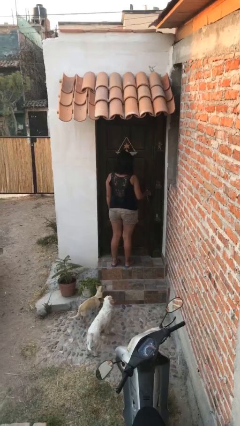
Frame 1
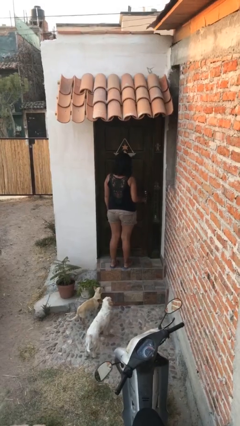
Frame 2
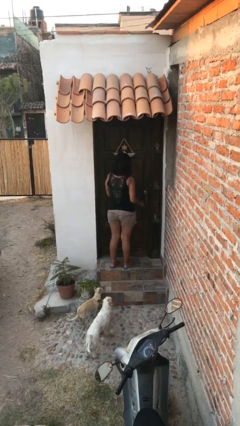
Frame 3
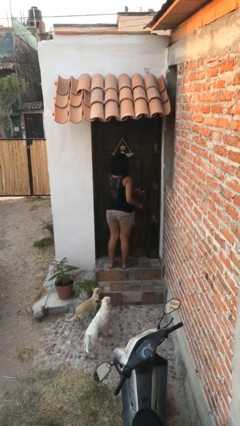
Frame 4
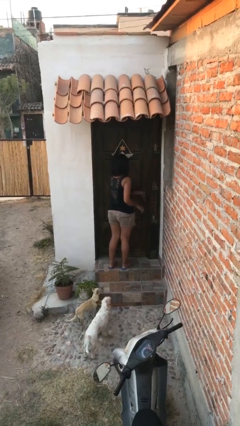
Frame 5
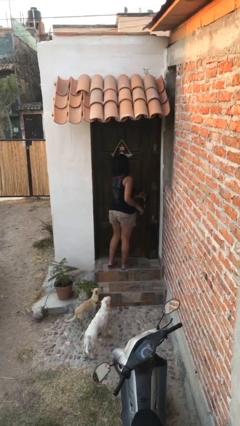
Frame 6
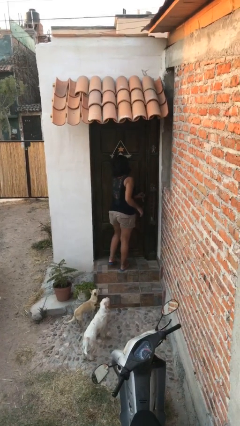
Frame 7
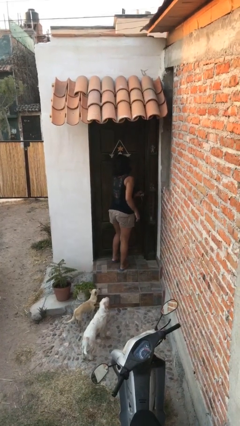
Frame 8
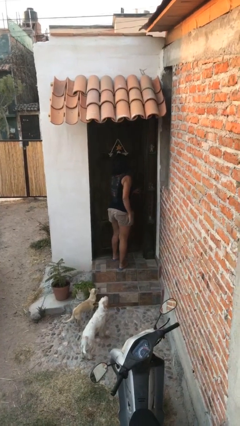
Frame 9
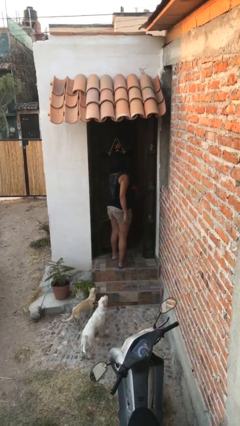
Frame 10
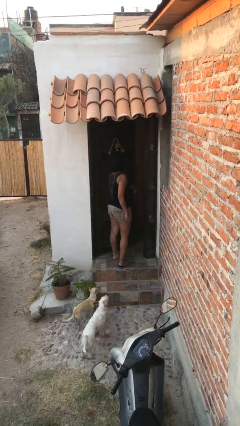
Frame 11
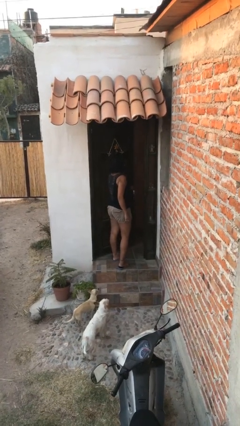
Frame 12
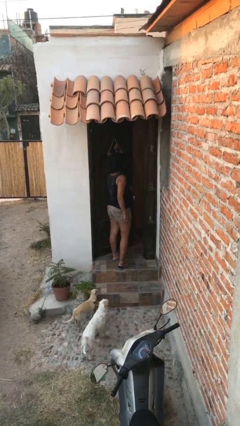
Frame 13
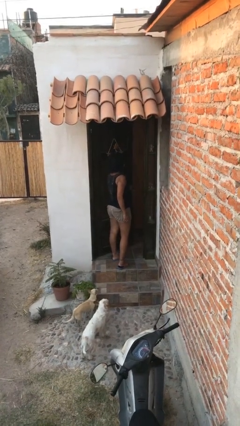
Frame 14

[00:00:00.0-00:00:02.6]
person opens facility door

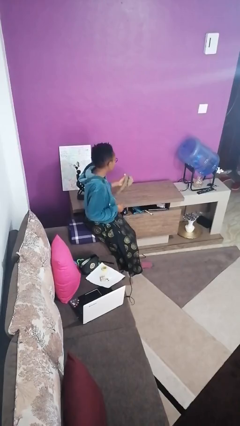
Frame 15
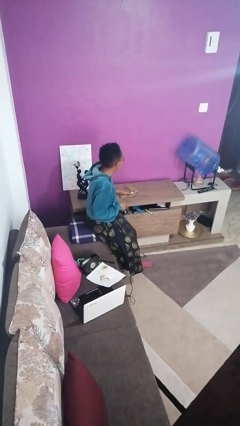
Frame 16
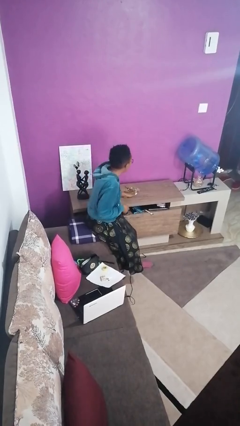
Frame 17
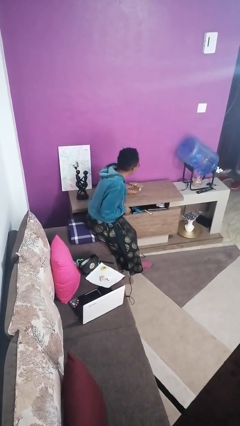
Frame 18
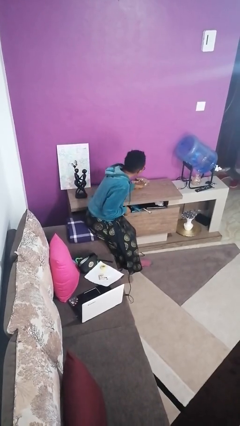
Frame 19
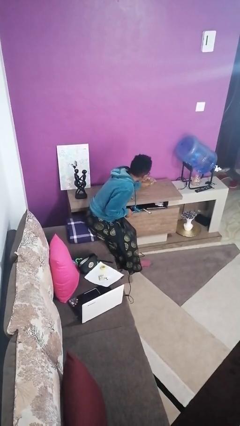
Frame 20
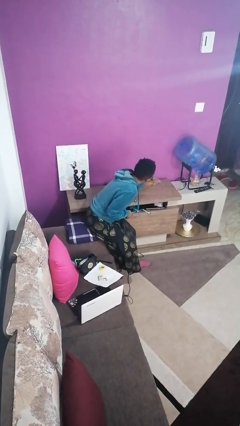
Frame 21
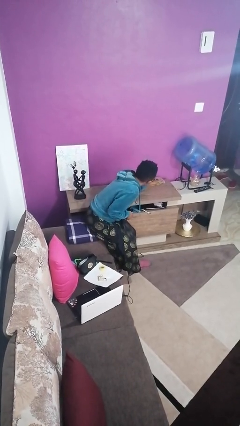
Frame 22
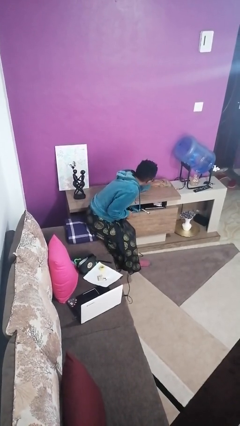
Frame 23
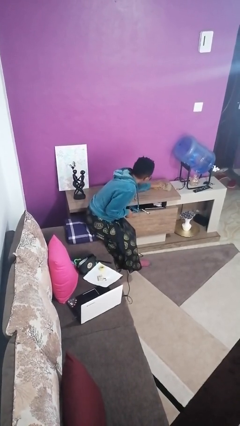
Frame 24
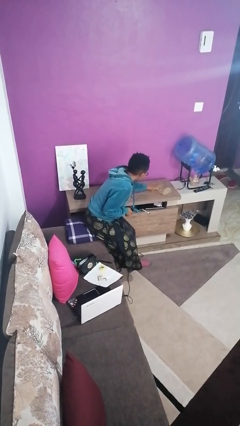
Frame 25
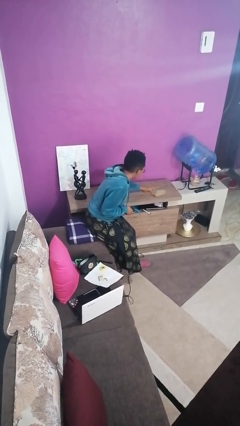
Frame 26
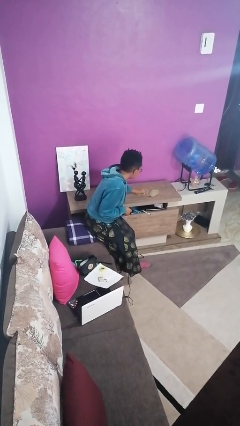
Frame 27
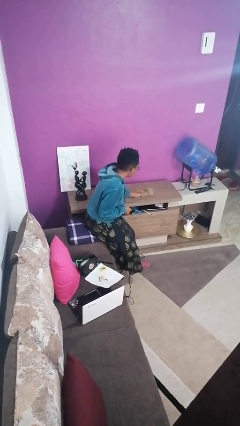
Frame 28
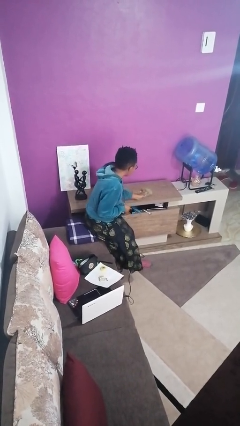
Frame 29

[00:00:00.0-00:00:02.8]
person cleans table with rag

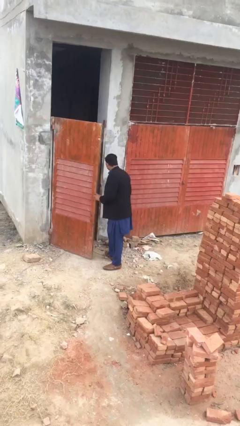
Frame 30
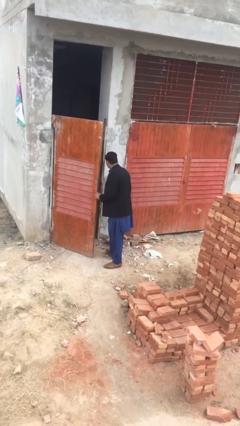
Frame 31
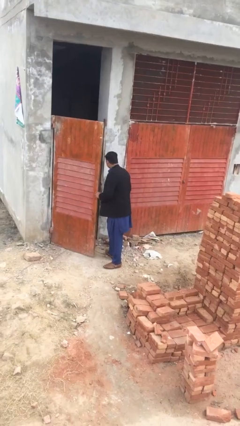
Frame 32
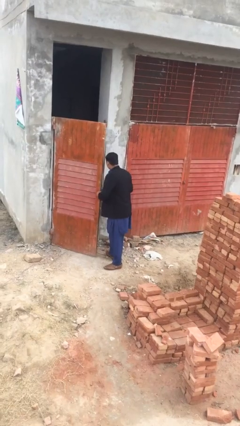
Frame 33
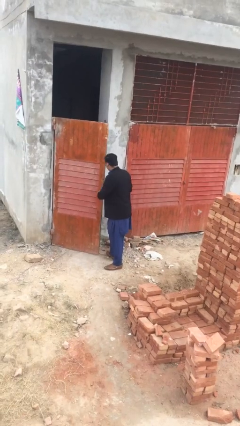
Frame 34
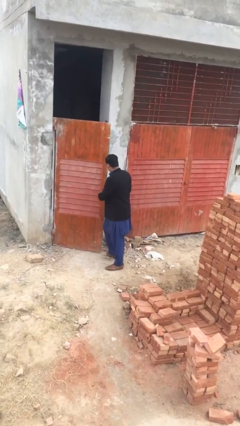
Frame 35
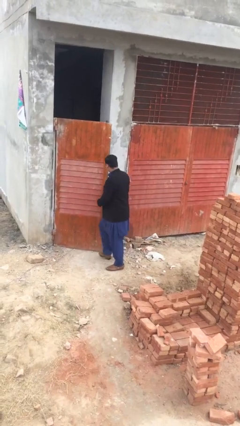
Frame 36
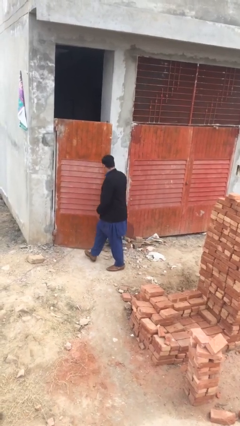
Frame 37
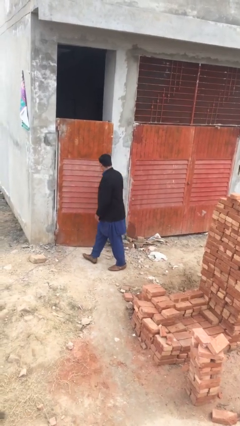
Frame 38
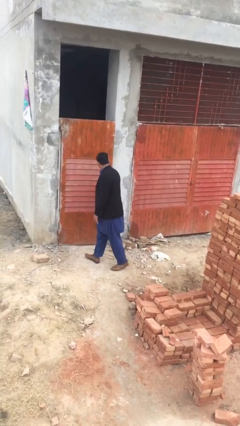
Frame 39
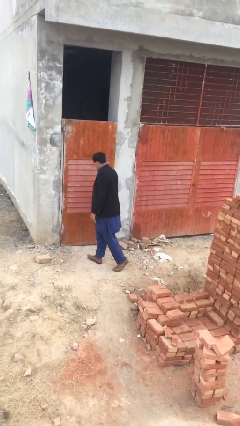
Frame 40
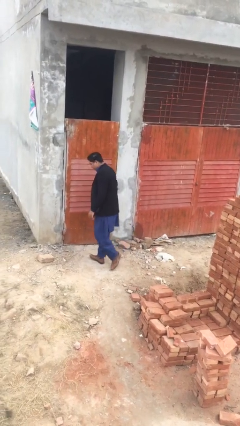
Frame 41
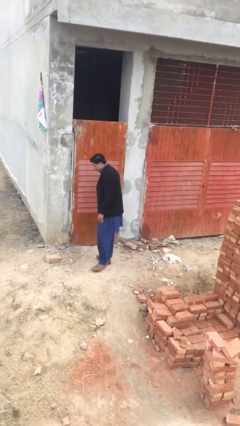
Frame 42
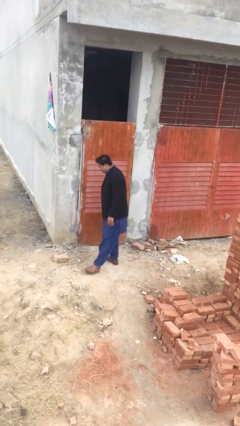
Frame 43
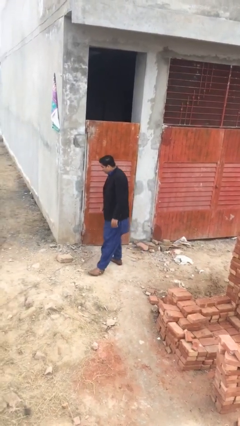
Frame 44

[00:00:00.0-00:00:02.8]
person closes facility door

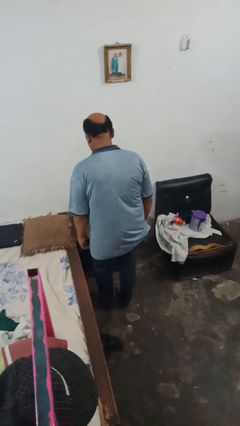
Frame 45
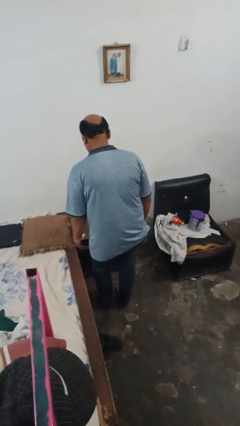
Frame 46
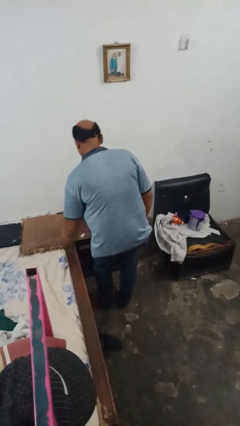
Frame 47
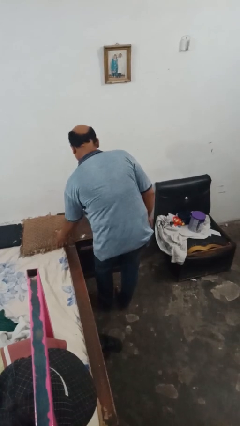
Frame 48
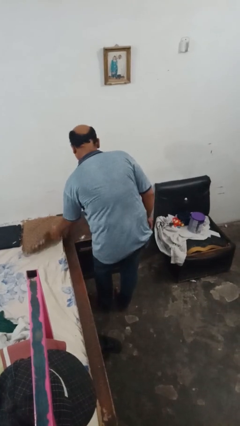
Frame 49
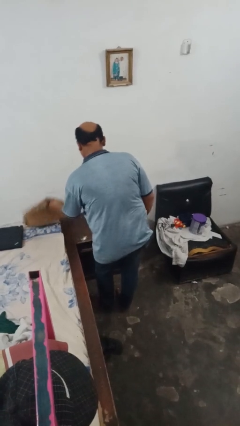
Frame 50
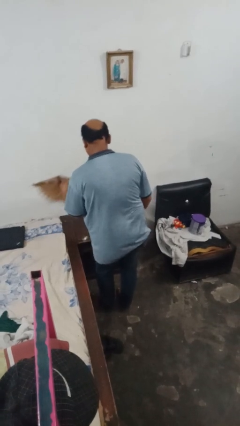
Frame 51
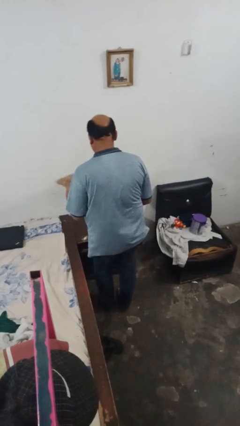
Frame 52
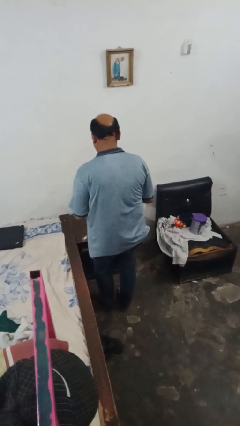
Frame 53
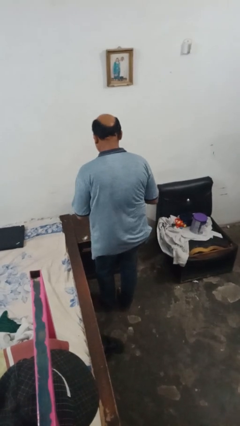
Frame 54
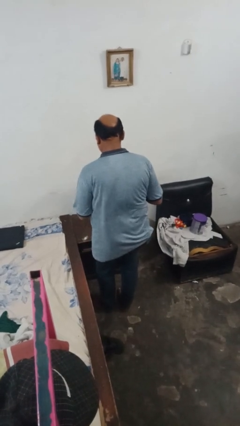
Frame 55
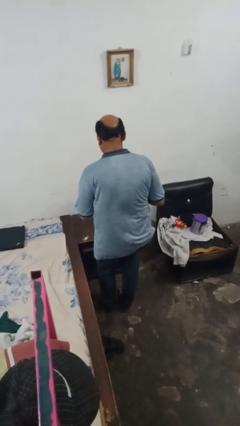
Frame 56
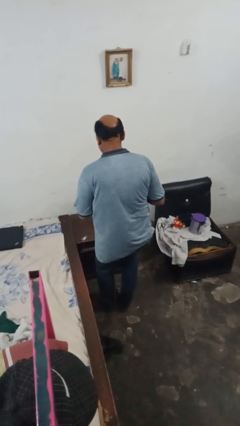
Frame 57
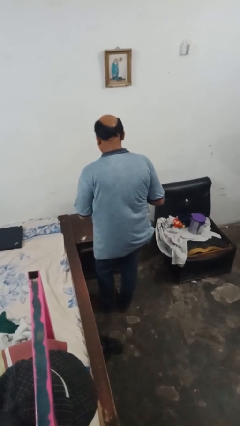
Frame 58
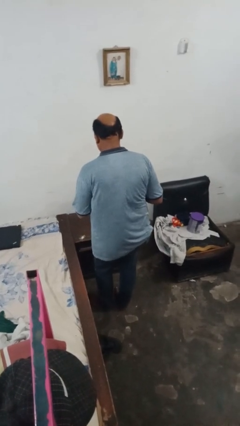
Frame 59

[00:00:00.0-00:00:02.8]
person picks up object from bed

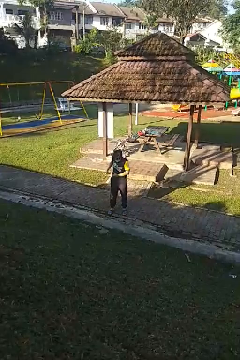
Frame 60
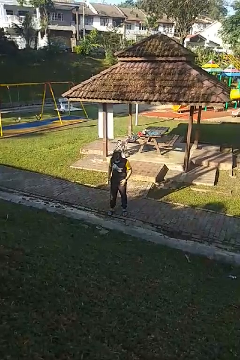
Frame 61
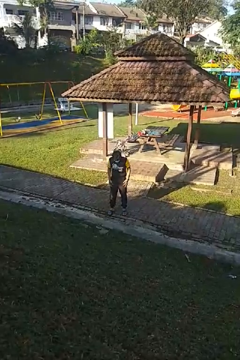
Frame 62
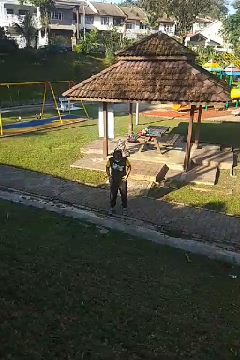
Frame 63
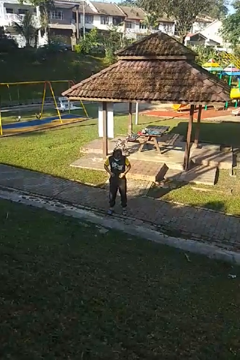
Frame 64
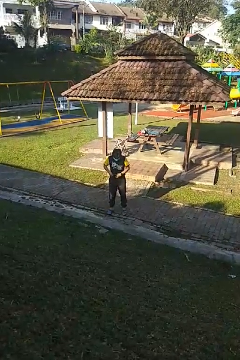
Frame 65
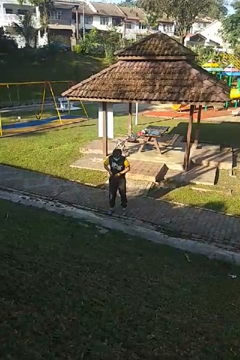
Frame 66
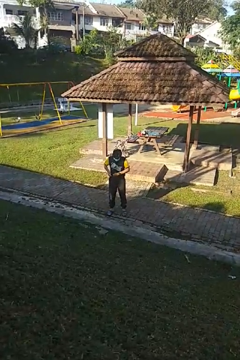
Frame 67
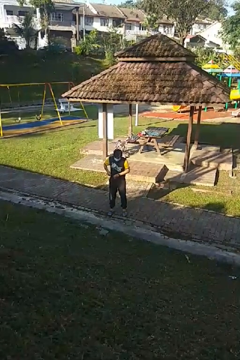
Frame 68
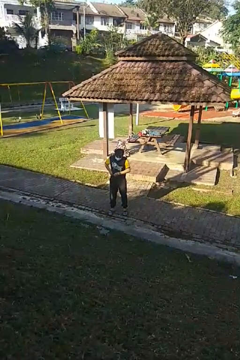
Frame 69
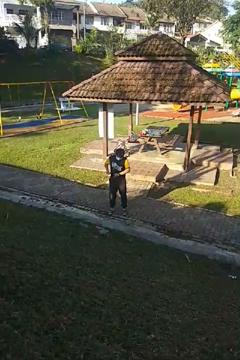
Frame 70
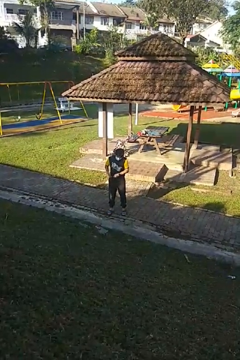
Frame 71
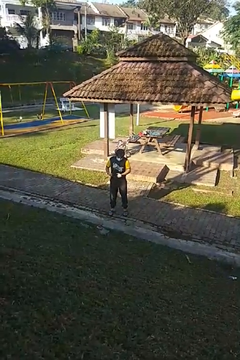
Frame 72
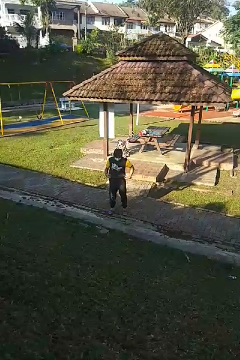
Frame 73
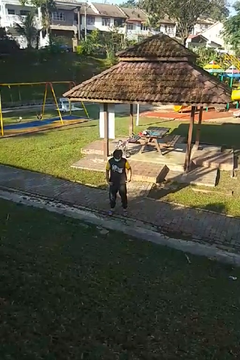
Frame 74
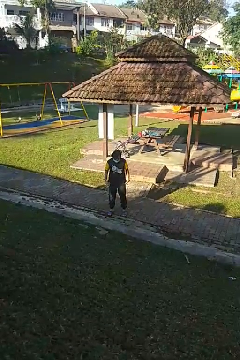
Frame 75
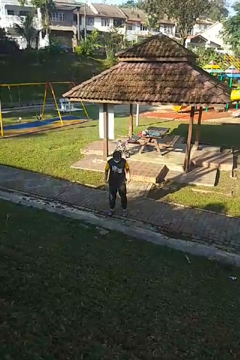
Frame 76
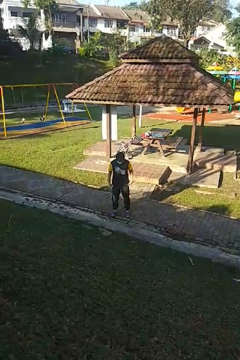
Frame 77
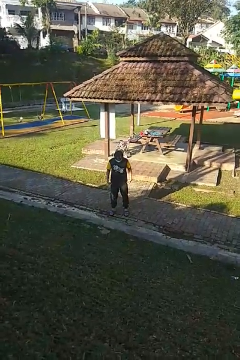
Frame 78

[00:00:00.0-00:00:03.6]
person untucks shirt

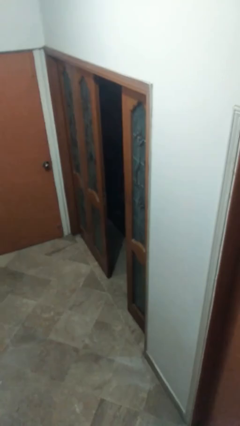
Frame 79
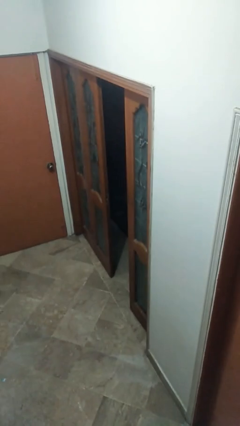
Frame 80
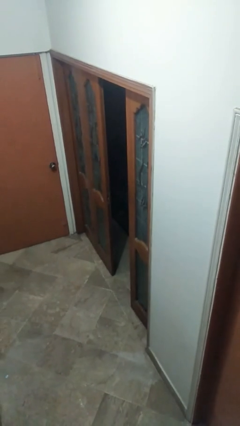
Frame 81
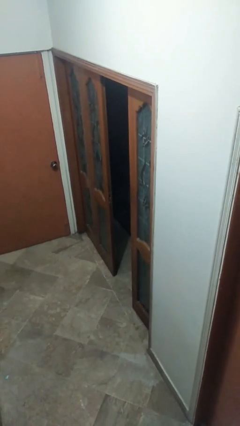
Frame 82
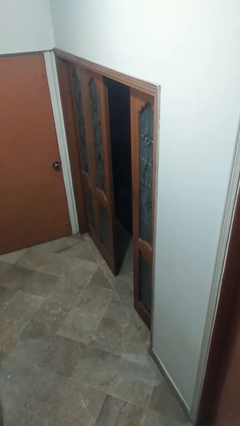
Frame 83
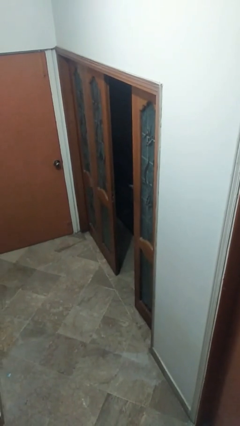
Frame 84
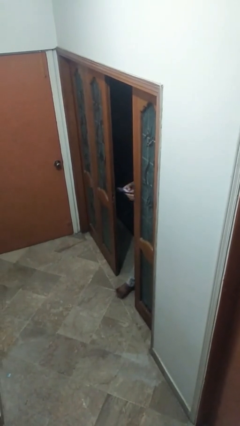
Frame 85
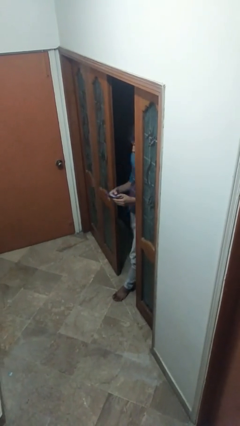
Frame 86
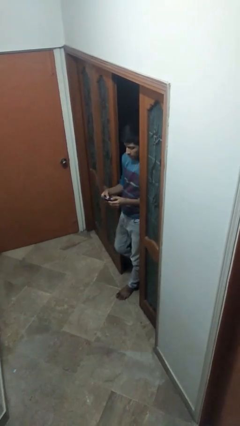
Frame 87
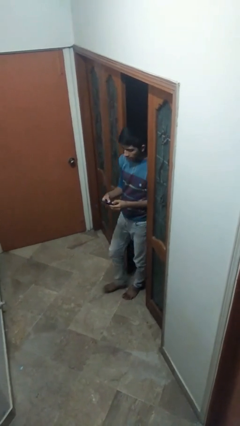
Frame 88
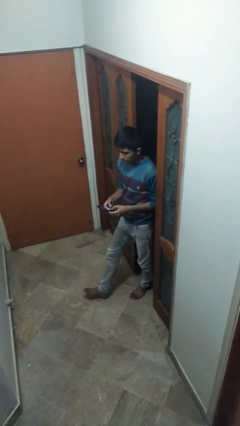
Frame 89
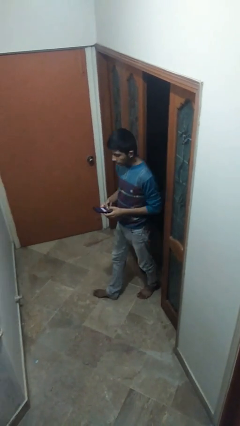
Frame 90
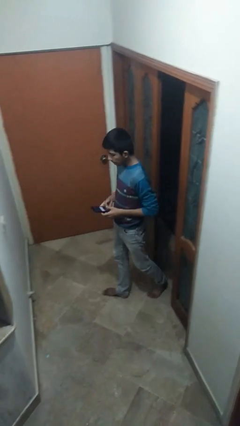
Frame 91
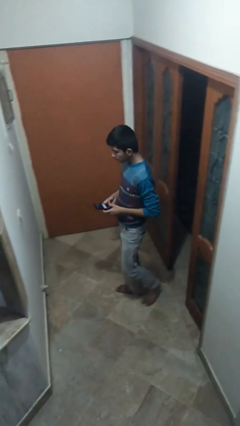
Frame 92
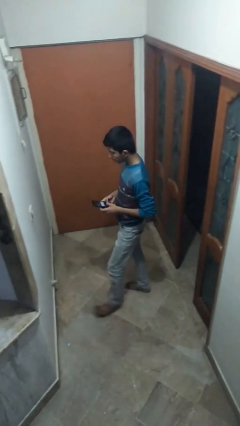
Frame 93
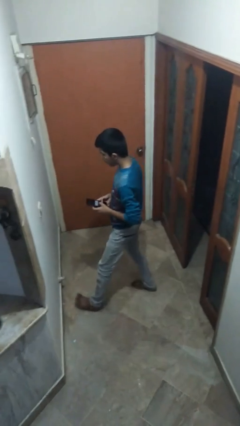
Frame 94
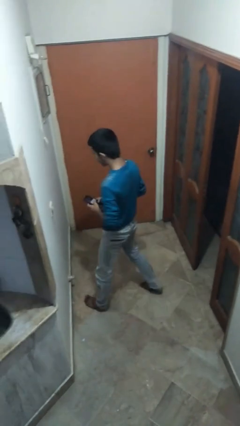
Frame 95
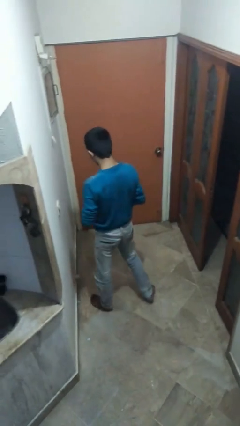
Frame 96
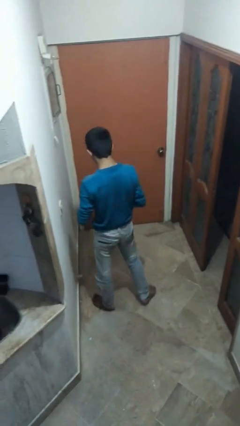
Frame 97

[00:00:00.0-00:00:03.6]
person enters scene through structure
